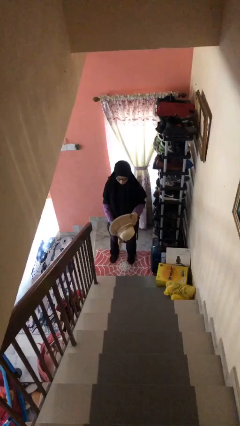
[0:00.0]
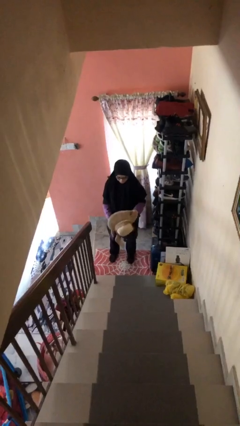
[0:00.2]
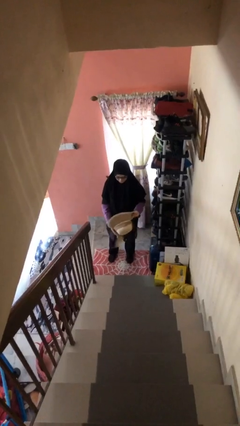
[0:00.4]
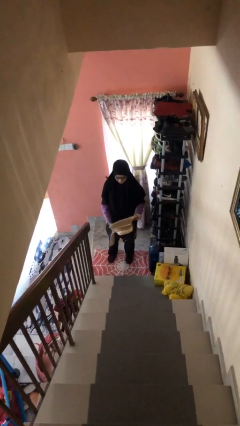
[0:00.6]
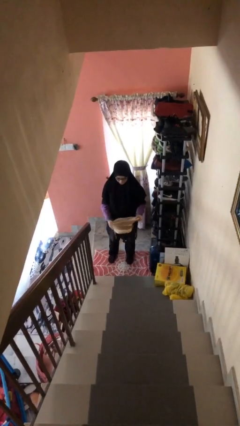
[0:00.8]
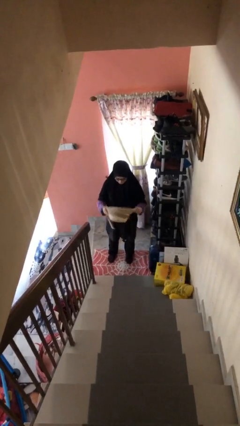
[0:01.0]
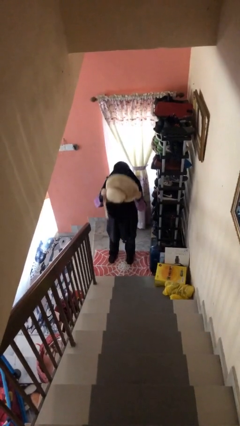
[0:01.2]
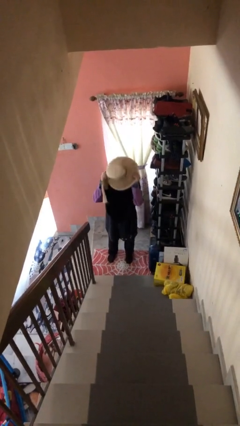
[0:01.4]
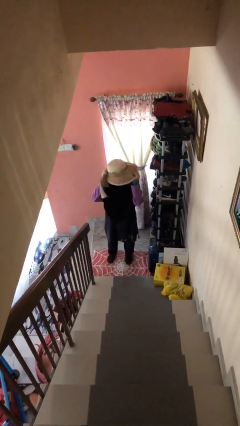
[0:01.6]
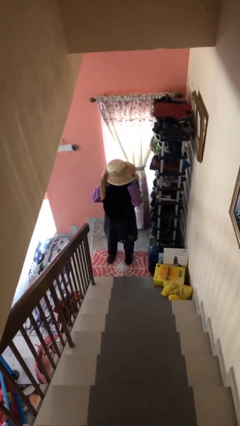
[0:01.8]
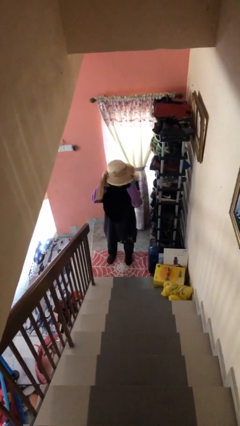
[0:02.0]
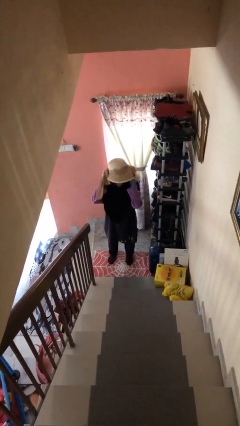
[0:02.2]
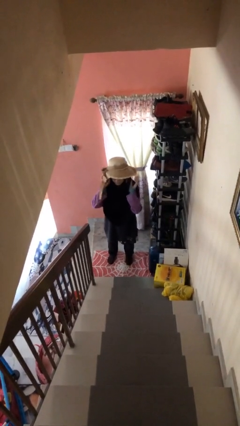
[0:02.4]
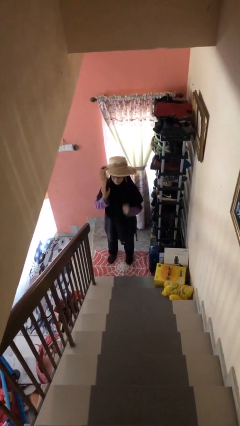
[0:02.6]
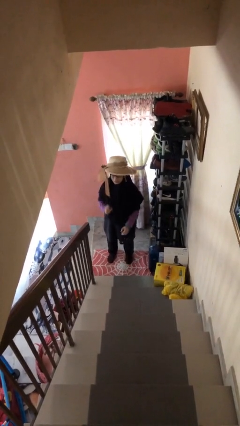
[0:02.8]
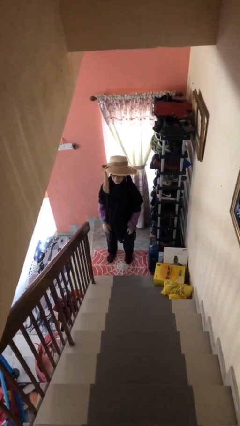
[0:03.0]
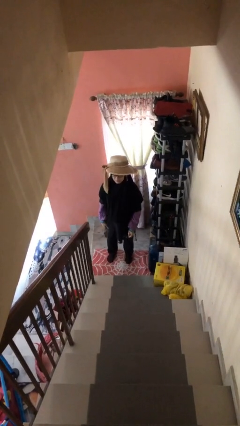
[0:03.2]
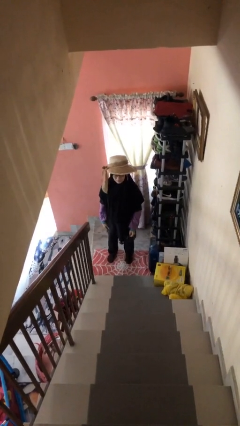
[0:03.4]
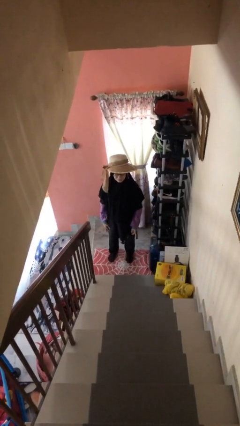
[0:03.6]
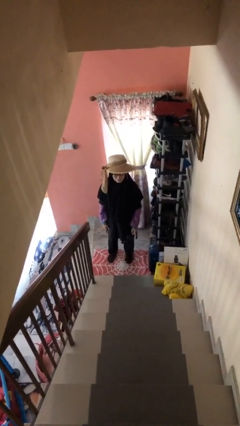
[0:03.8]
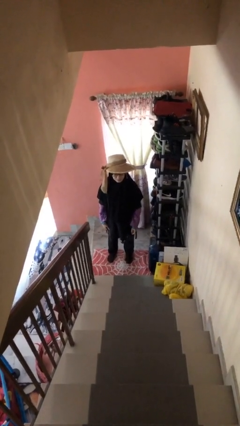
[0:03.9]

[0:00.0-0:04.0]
person puts on hat

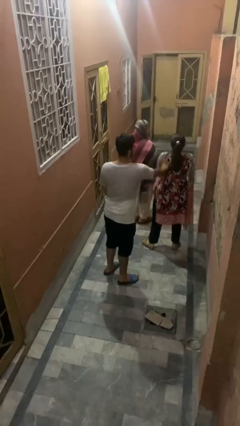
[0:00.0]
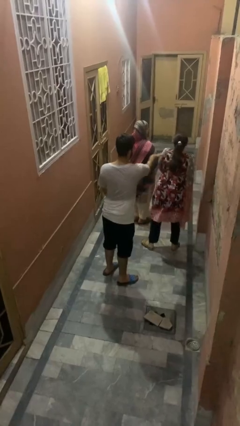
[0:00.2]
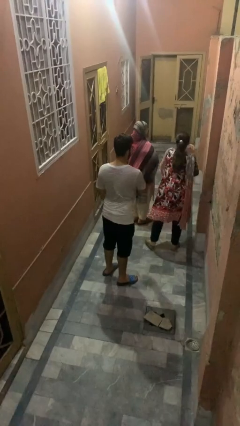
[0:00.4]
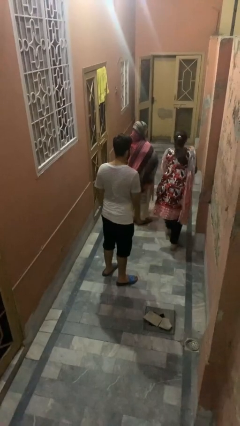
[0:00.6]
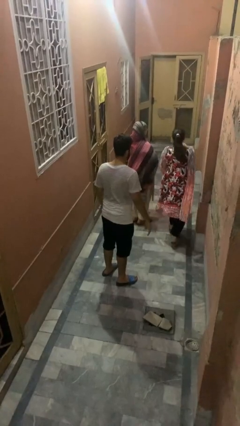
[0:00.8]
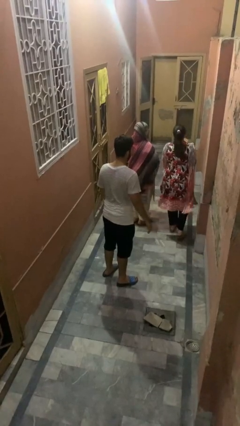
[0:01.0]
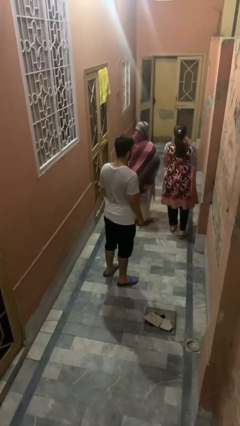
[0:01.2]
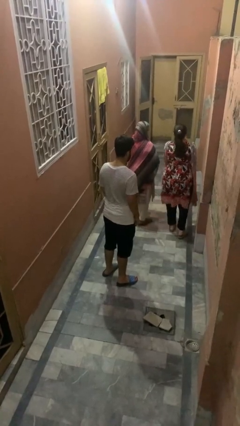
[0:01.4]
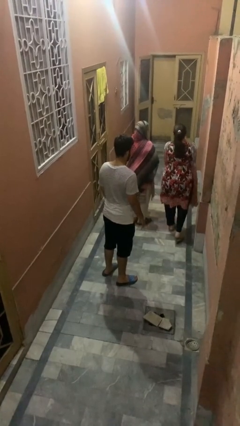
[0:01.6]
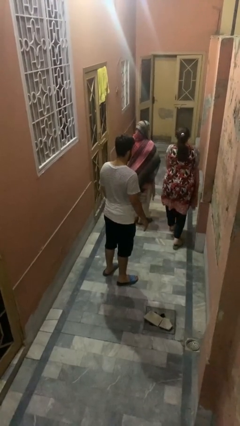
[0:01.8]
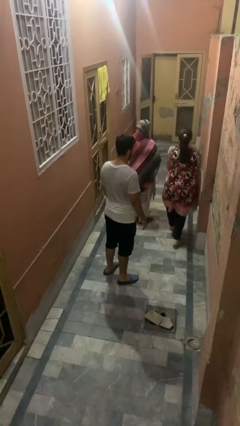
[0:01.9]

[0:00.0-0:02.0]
person shoves person

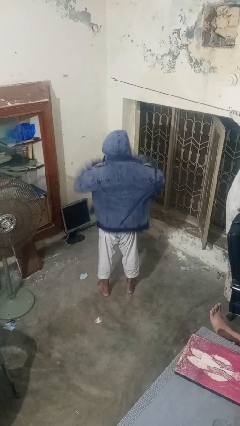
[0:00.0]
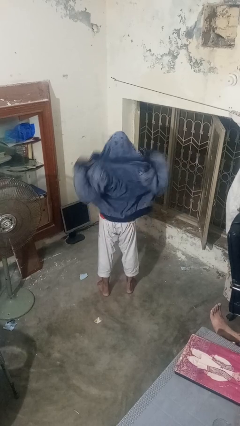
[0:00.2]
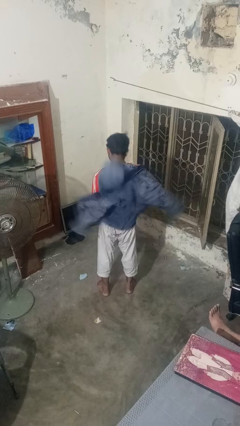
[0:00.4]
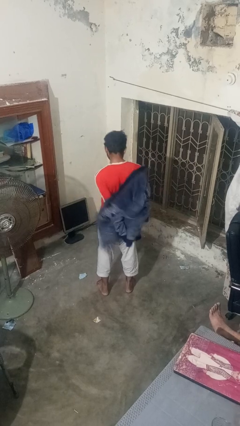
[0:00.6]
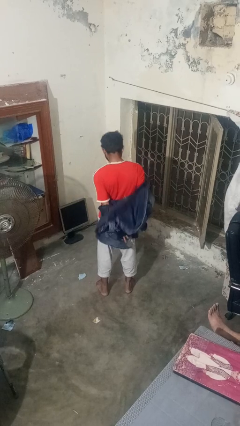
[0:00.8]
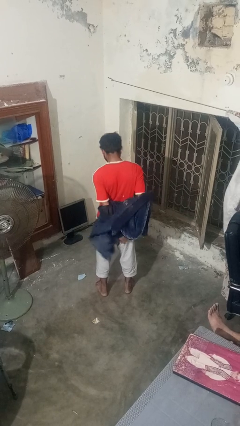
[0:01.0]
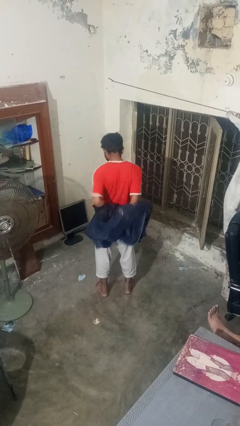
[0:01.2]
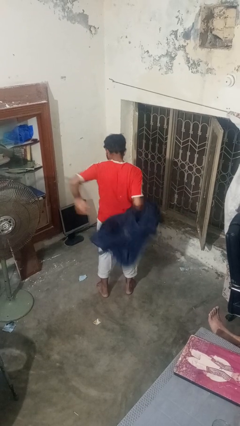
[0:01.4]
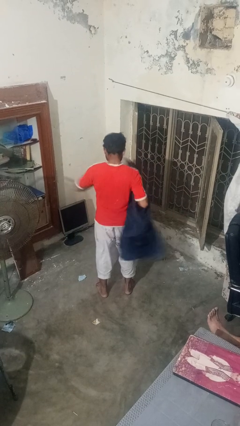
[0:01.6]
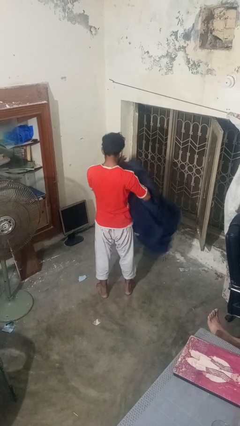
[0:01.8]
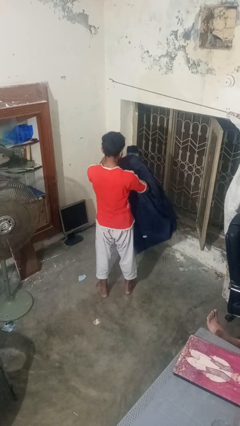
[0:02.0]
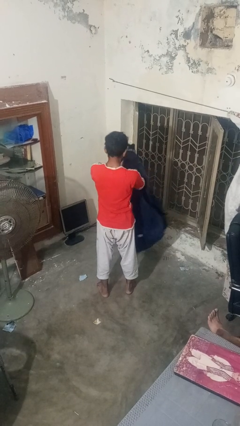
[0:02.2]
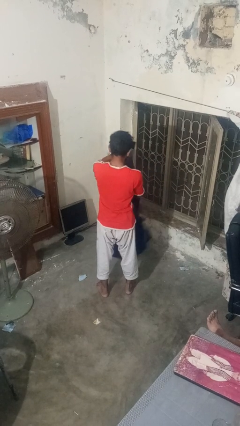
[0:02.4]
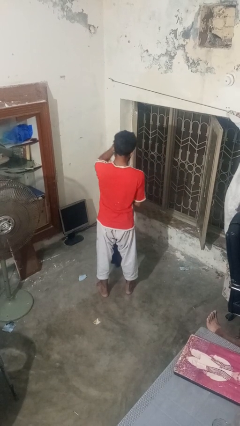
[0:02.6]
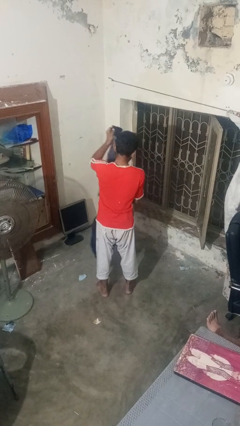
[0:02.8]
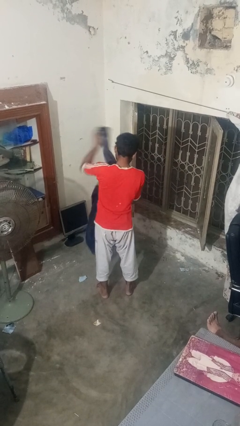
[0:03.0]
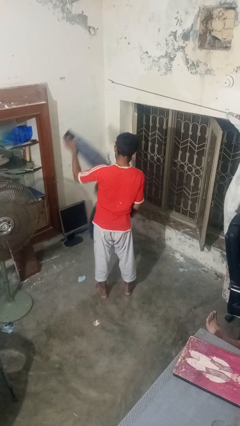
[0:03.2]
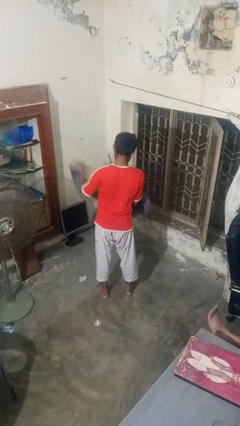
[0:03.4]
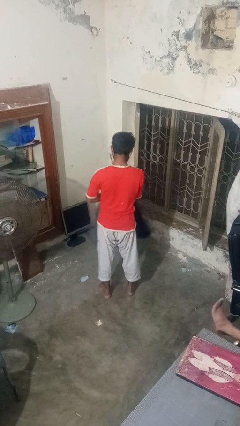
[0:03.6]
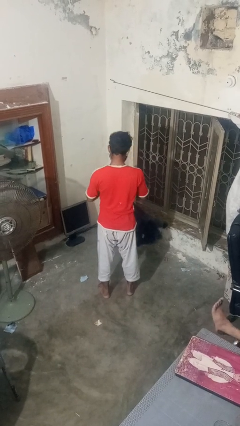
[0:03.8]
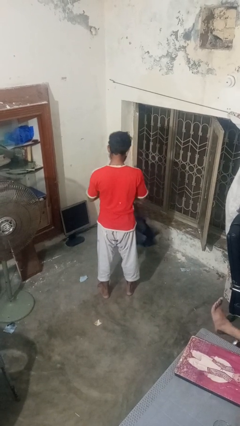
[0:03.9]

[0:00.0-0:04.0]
person takes off hoodie

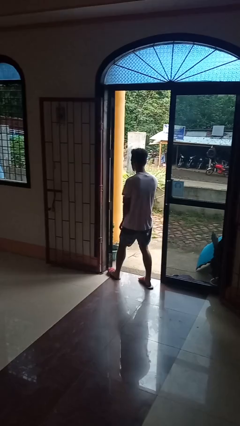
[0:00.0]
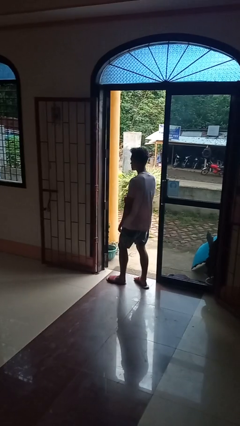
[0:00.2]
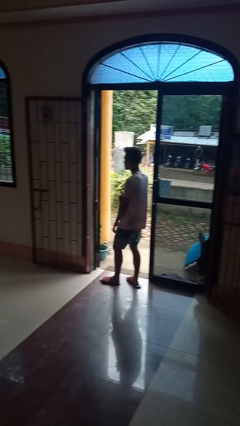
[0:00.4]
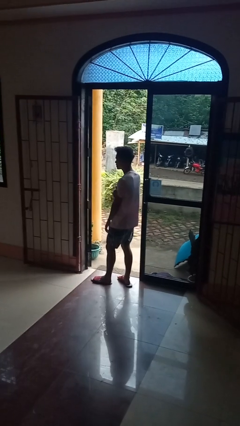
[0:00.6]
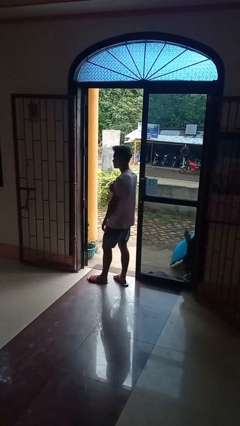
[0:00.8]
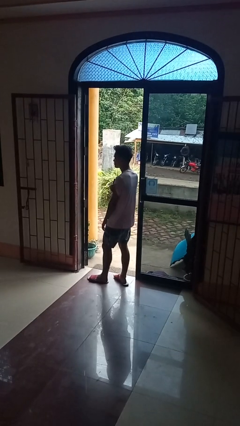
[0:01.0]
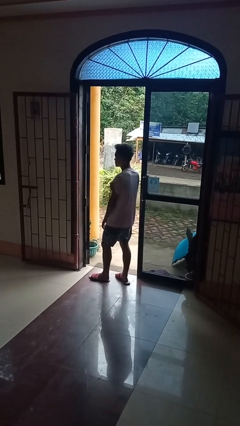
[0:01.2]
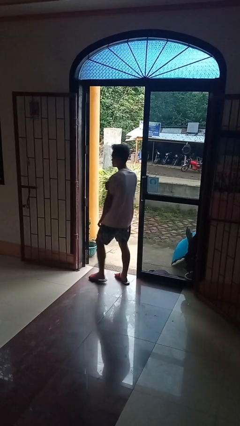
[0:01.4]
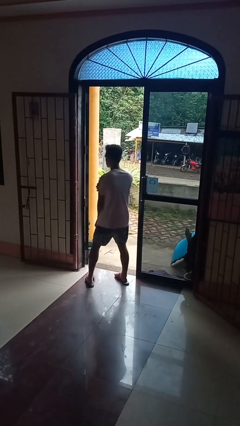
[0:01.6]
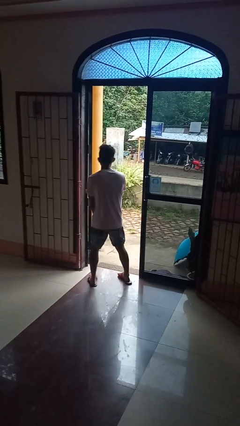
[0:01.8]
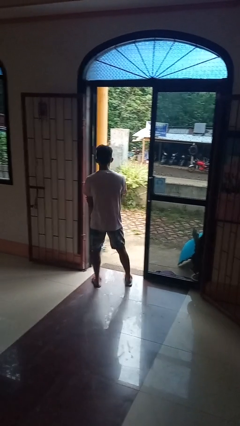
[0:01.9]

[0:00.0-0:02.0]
person bumps into wall

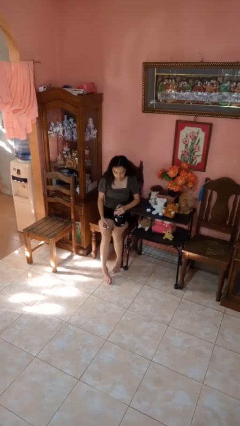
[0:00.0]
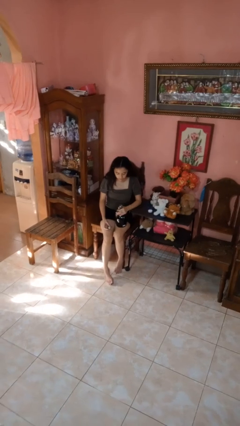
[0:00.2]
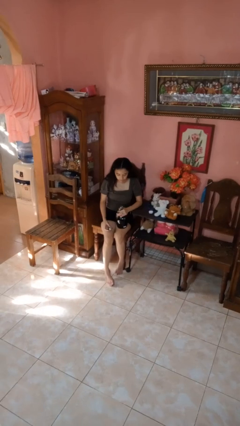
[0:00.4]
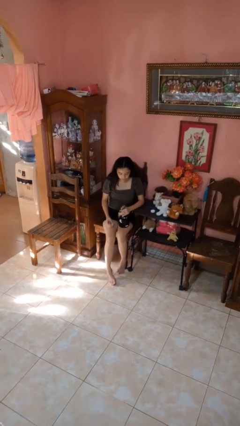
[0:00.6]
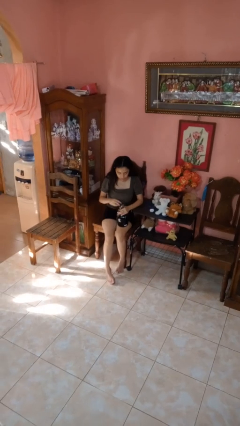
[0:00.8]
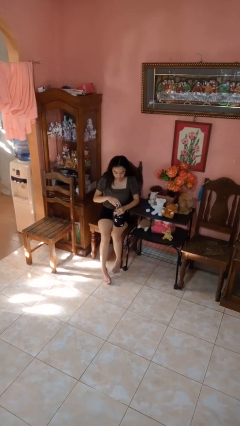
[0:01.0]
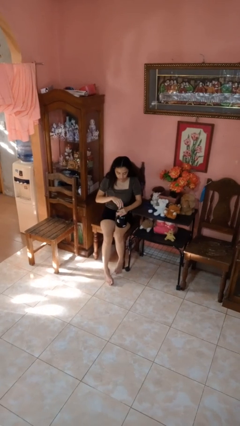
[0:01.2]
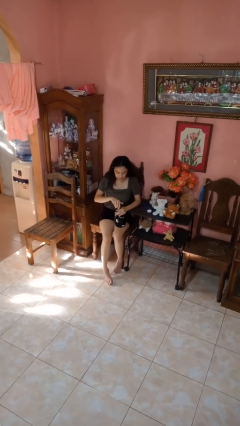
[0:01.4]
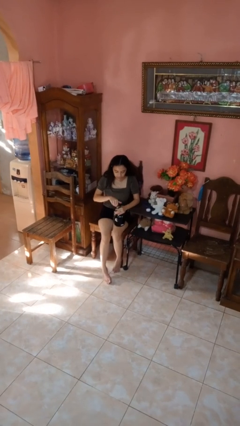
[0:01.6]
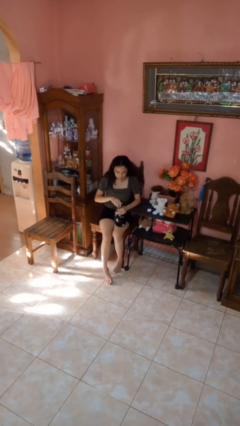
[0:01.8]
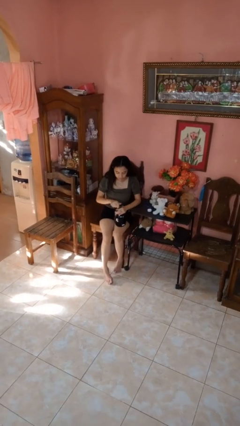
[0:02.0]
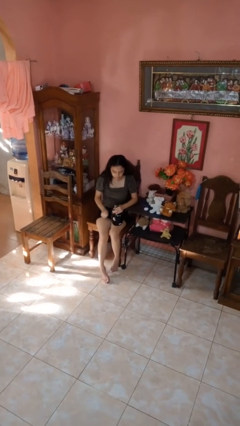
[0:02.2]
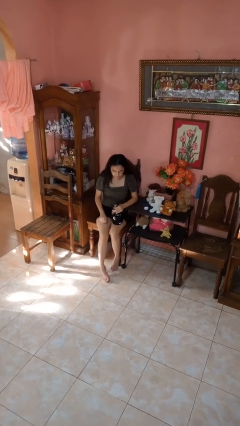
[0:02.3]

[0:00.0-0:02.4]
person screws lid to bottle

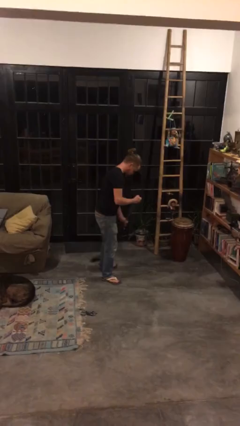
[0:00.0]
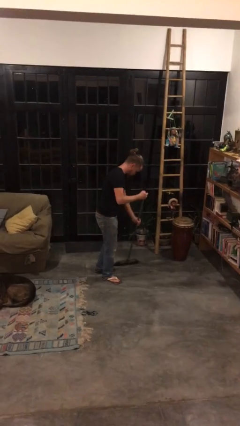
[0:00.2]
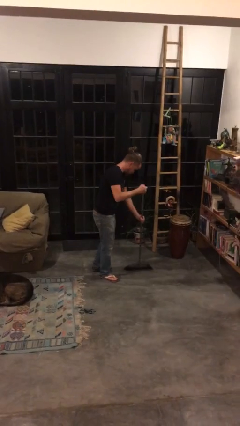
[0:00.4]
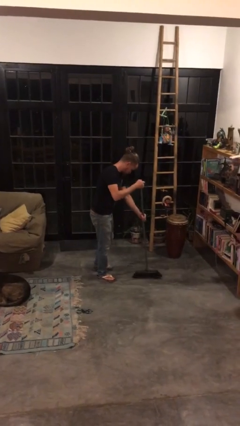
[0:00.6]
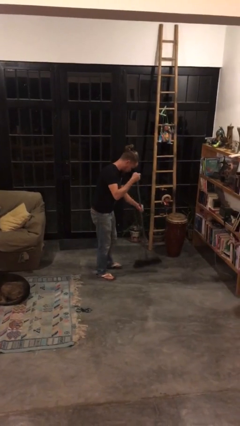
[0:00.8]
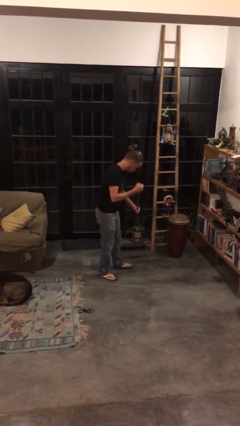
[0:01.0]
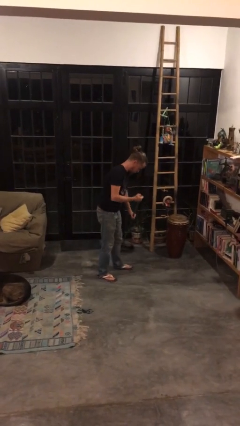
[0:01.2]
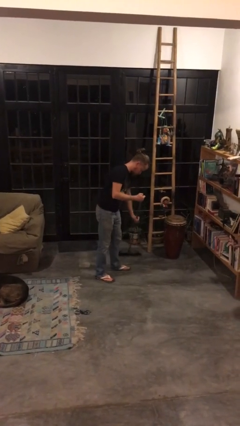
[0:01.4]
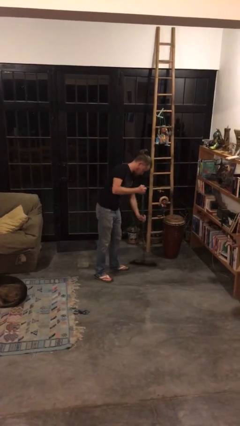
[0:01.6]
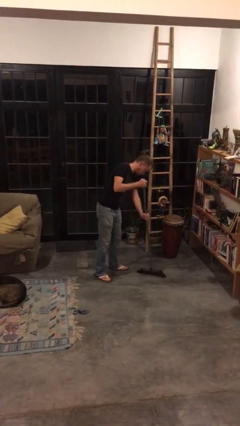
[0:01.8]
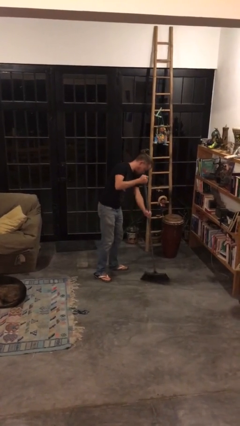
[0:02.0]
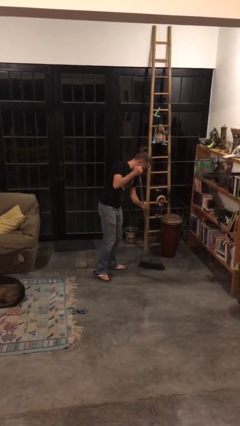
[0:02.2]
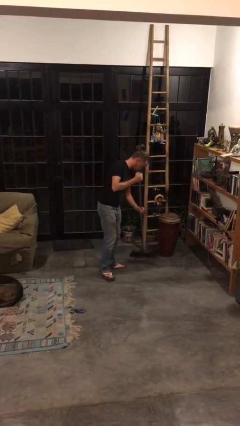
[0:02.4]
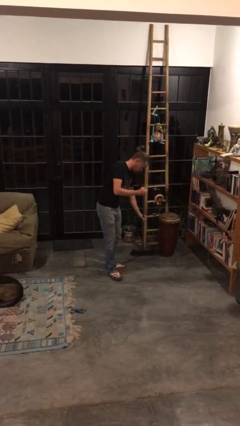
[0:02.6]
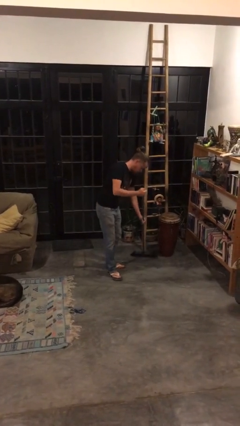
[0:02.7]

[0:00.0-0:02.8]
person sweeps floor

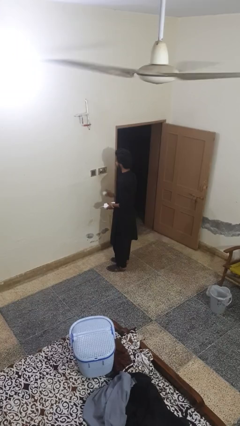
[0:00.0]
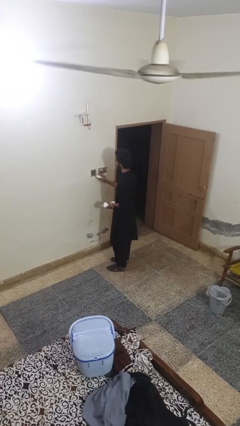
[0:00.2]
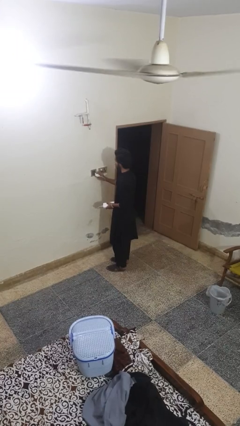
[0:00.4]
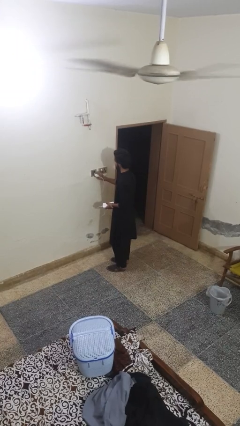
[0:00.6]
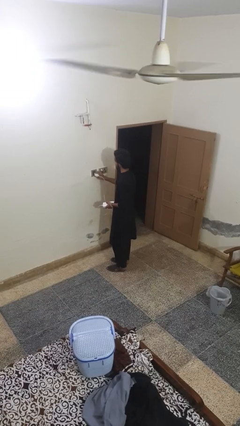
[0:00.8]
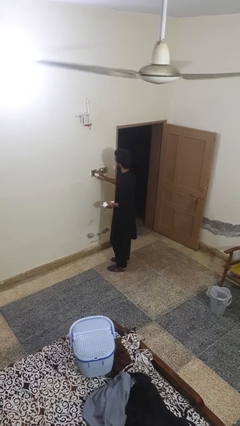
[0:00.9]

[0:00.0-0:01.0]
person plugs into electrical socket
